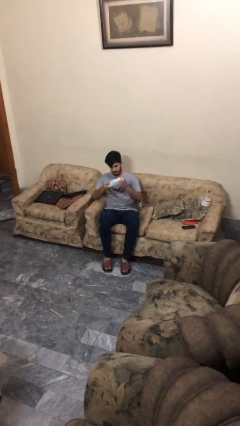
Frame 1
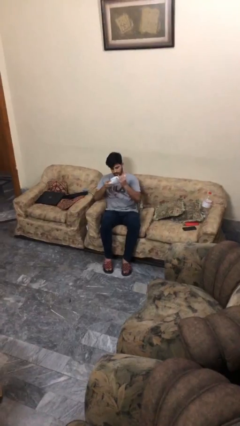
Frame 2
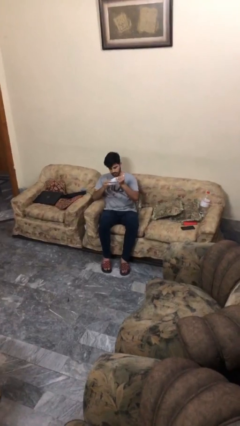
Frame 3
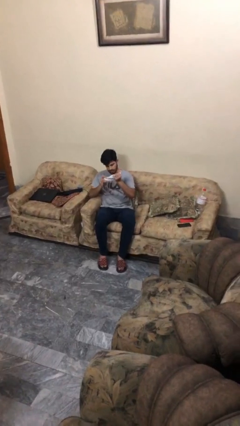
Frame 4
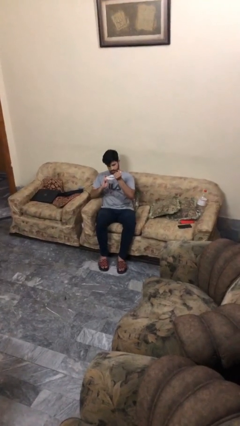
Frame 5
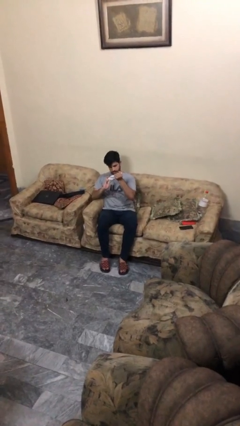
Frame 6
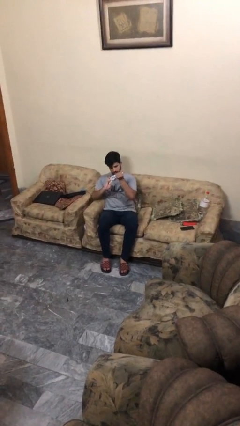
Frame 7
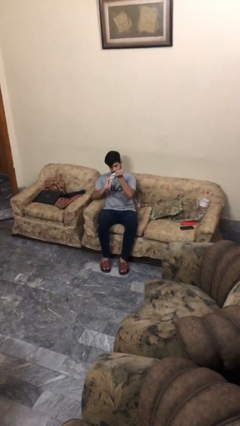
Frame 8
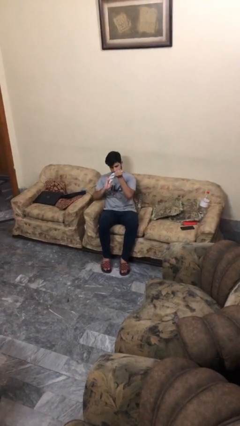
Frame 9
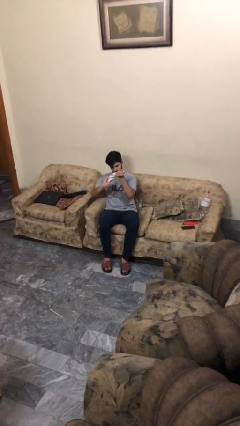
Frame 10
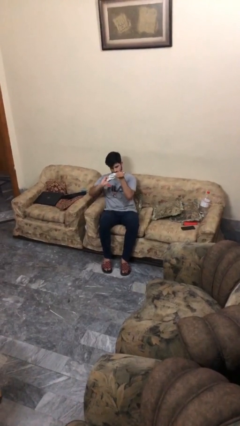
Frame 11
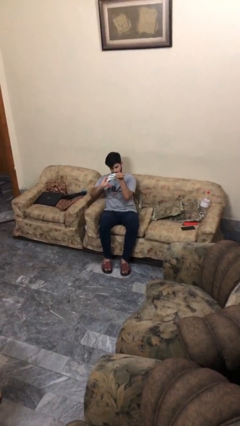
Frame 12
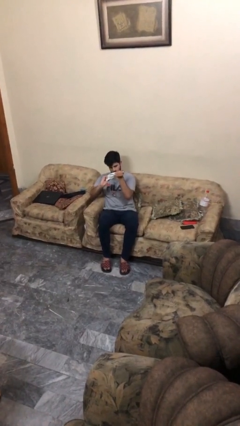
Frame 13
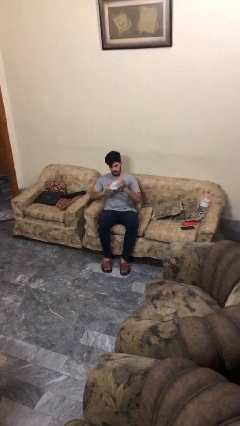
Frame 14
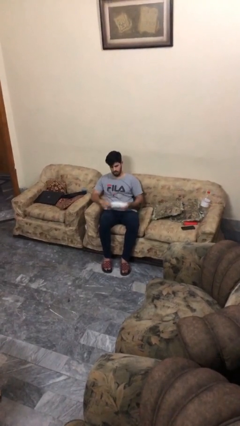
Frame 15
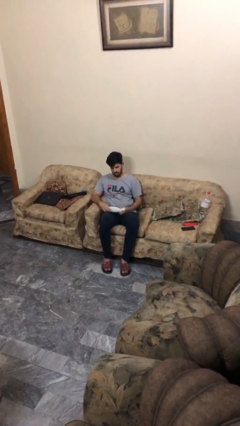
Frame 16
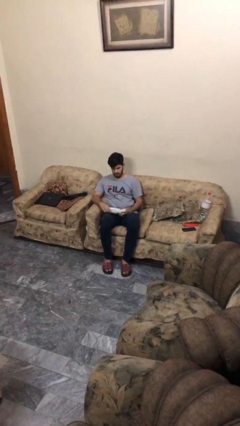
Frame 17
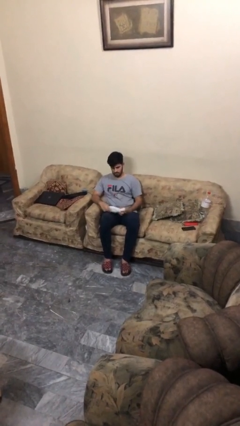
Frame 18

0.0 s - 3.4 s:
person squeezes object

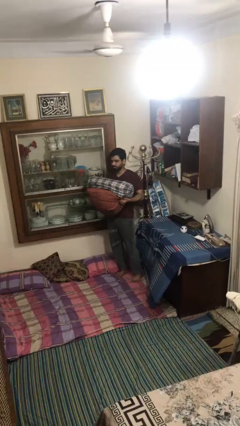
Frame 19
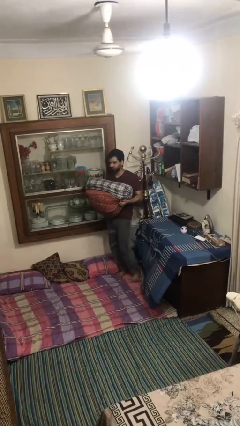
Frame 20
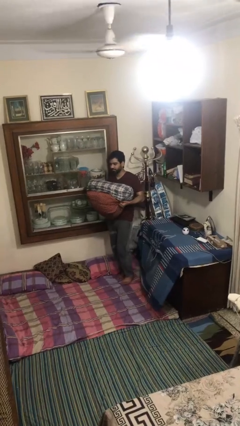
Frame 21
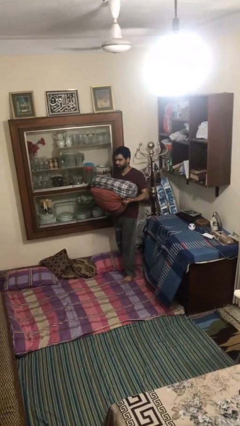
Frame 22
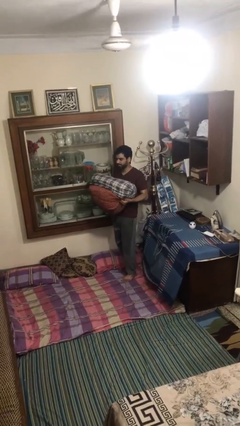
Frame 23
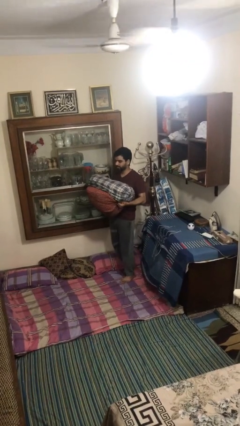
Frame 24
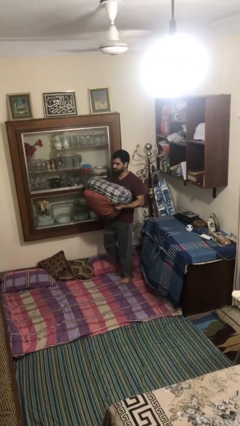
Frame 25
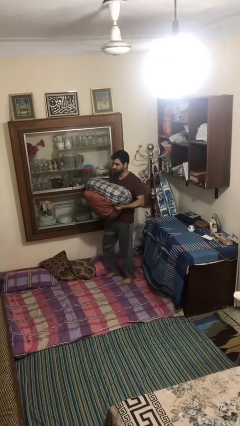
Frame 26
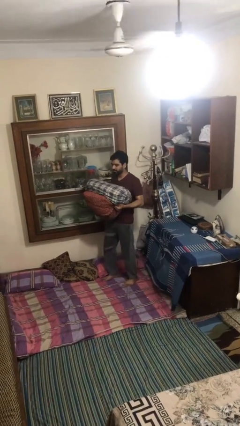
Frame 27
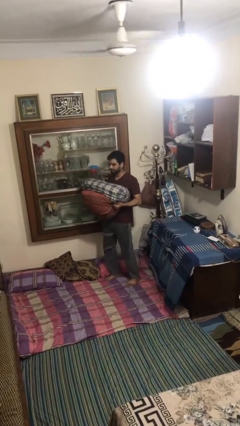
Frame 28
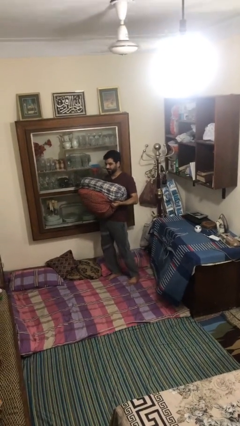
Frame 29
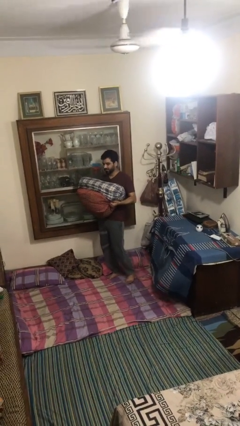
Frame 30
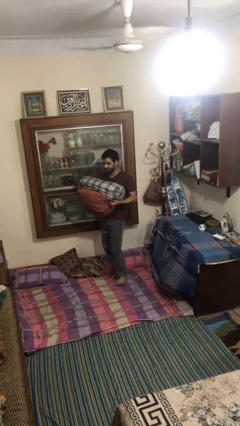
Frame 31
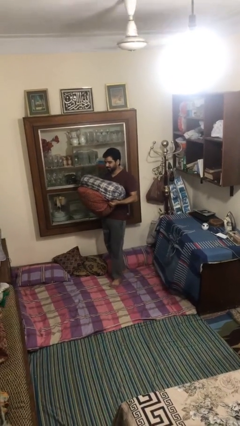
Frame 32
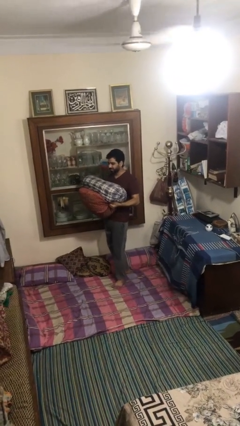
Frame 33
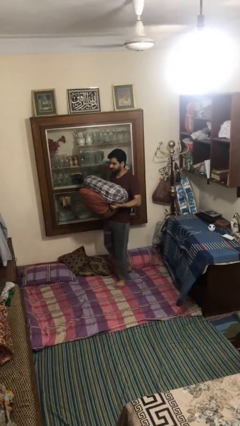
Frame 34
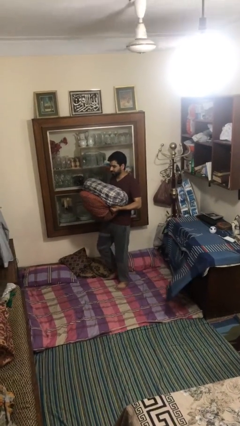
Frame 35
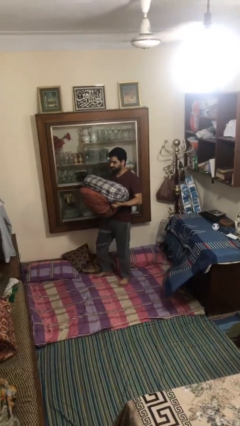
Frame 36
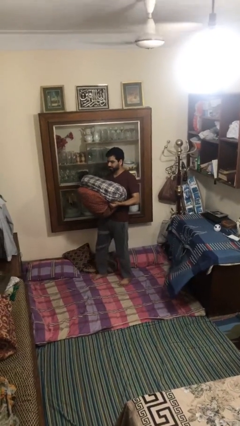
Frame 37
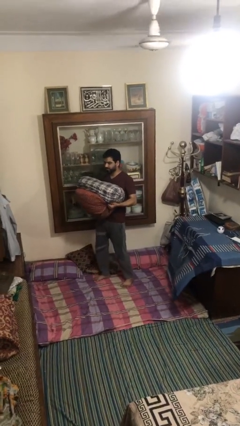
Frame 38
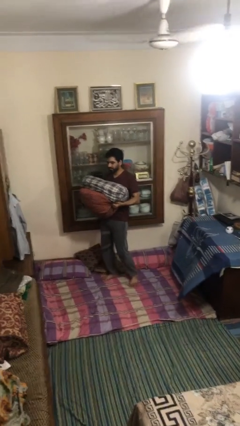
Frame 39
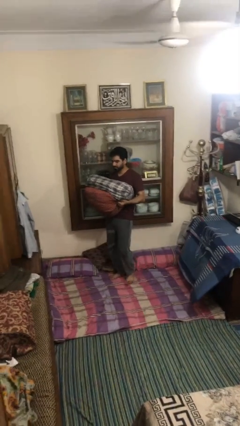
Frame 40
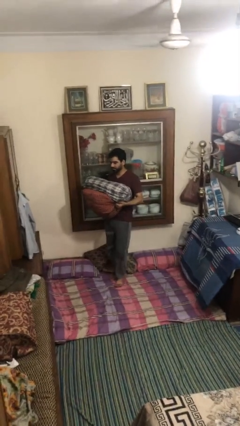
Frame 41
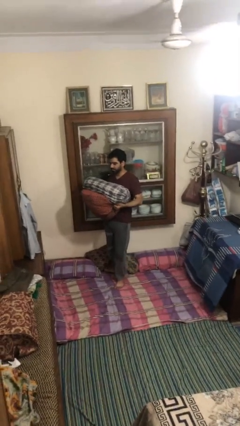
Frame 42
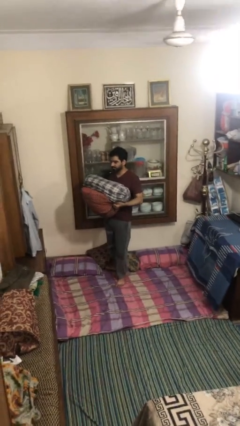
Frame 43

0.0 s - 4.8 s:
person carries heavy object

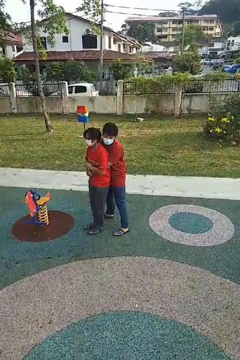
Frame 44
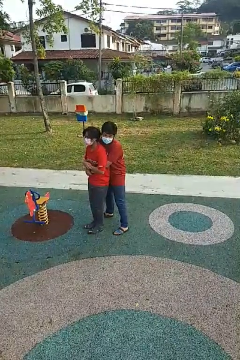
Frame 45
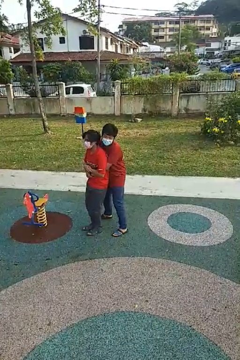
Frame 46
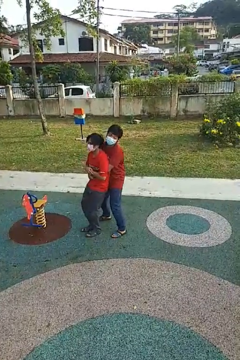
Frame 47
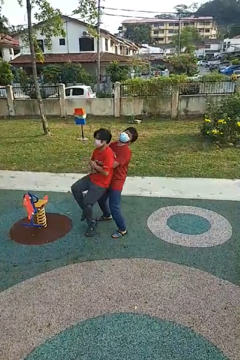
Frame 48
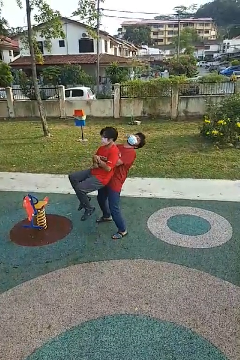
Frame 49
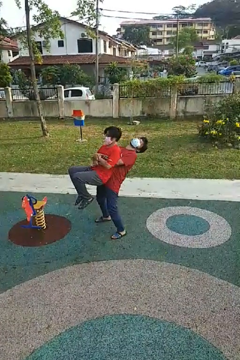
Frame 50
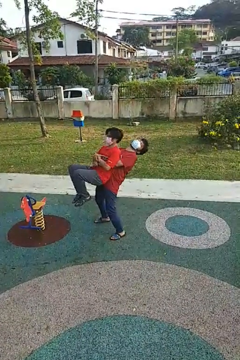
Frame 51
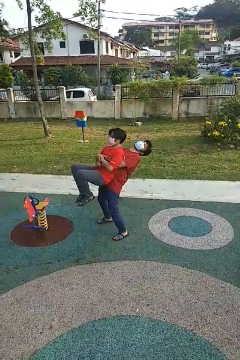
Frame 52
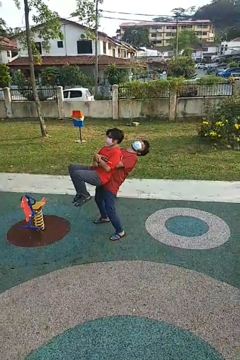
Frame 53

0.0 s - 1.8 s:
person picks up person

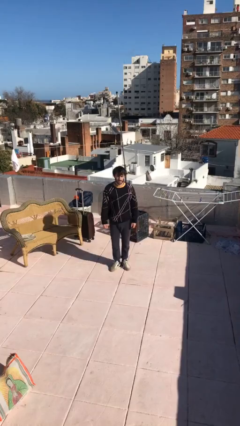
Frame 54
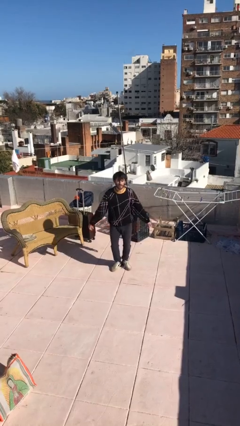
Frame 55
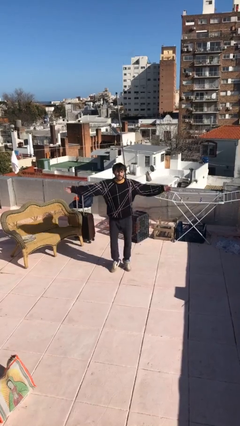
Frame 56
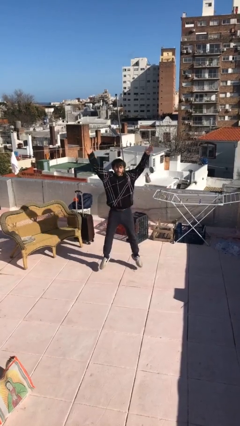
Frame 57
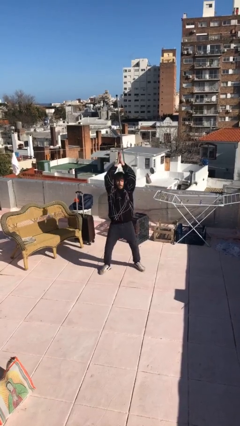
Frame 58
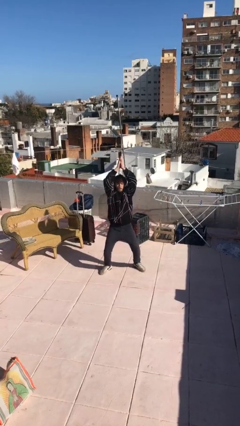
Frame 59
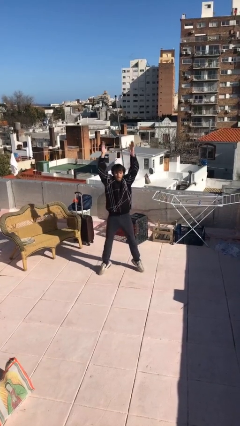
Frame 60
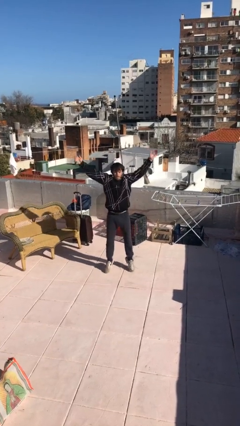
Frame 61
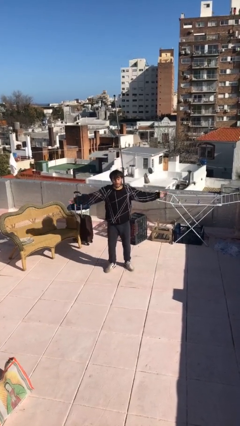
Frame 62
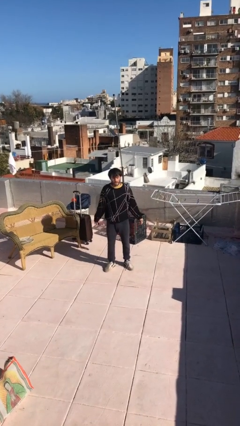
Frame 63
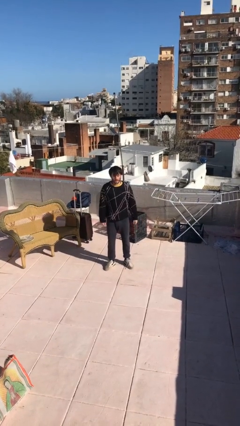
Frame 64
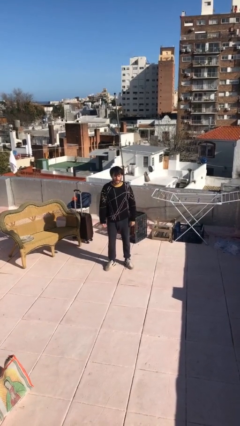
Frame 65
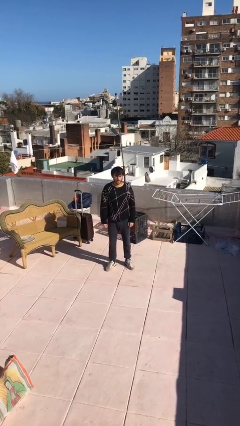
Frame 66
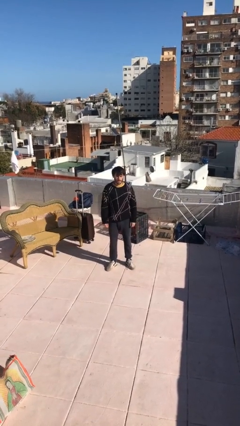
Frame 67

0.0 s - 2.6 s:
person exercises with jumping jacks

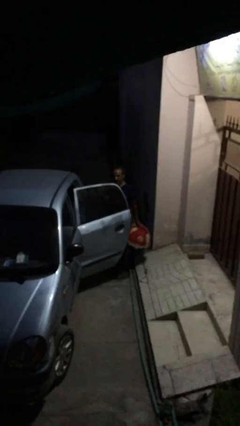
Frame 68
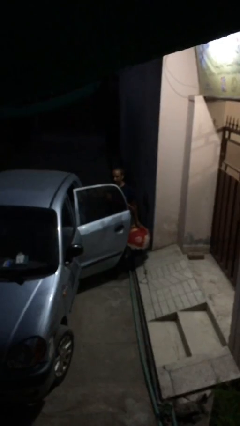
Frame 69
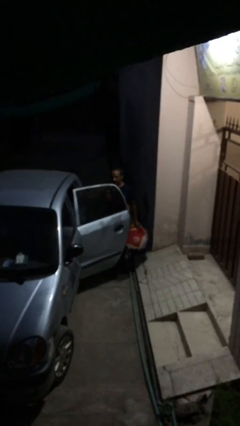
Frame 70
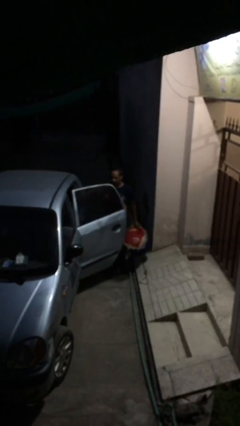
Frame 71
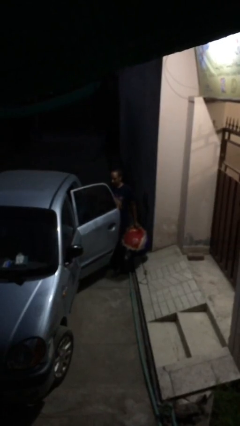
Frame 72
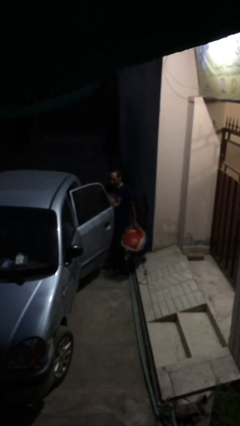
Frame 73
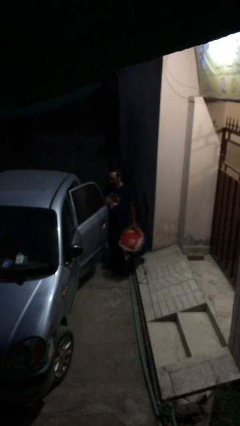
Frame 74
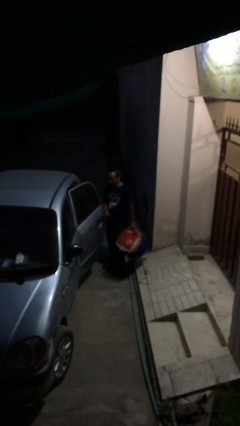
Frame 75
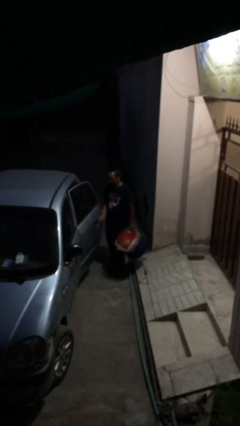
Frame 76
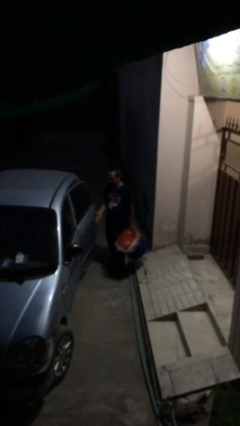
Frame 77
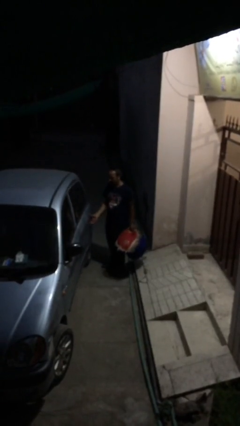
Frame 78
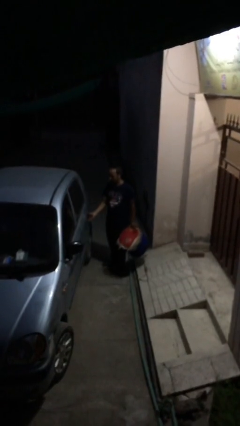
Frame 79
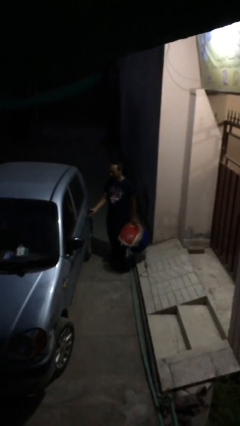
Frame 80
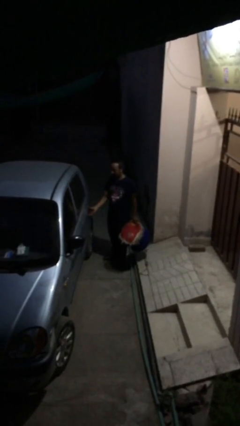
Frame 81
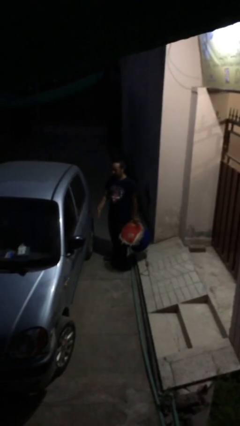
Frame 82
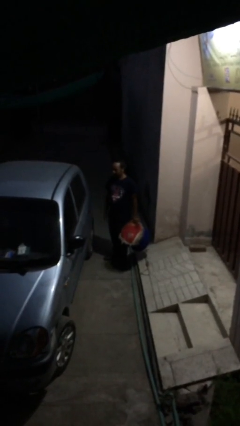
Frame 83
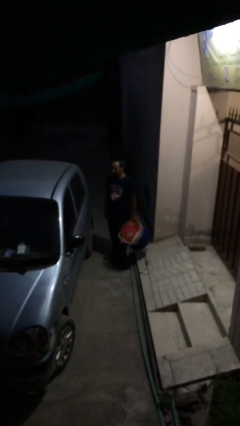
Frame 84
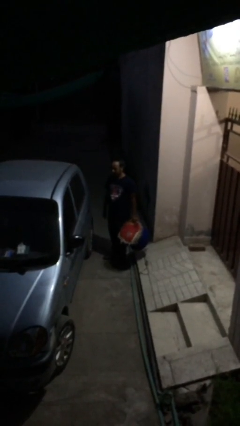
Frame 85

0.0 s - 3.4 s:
person closes car door

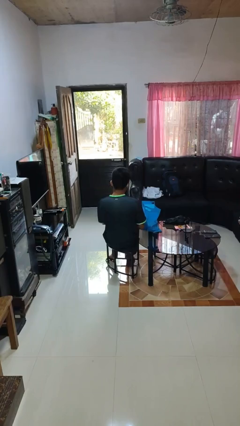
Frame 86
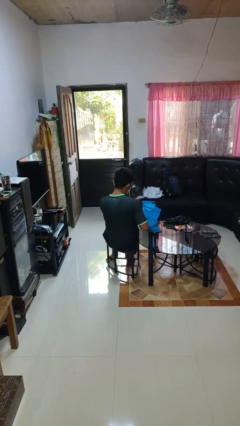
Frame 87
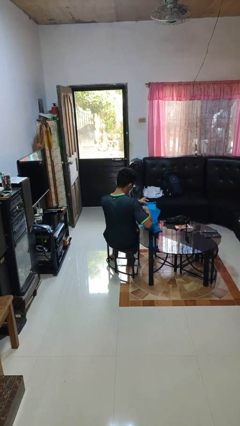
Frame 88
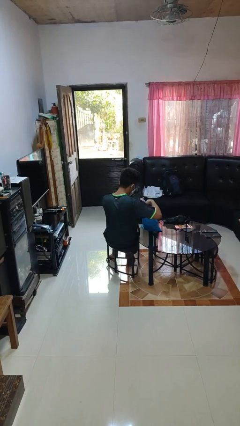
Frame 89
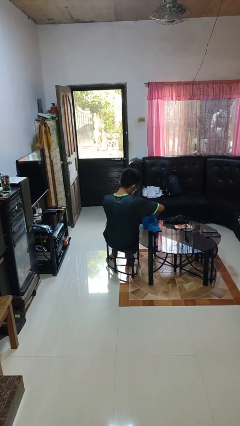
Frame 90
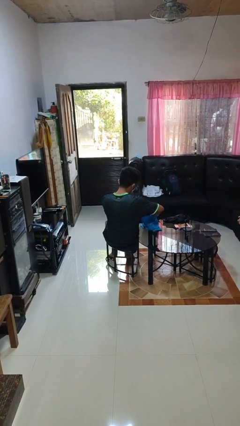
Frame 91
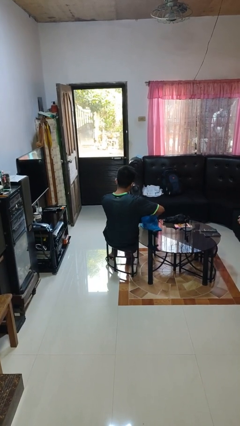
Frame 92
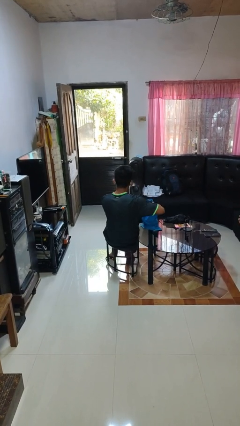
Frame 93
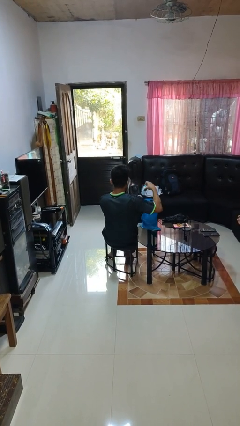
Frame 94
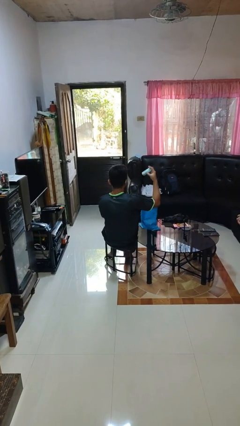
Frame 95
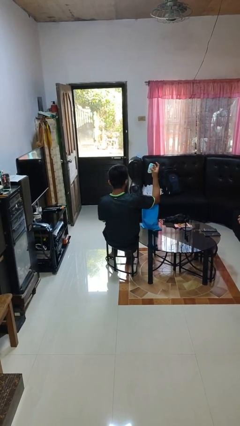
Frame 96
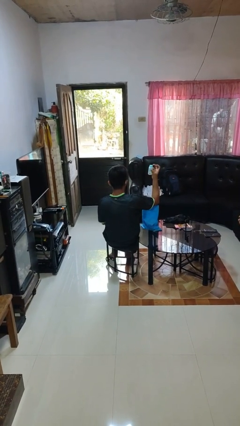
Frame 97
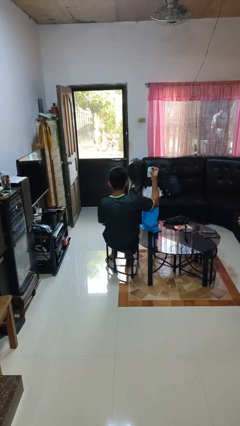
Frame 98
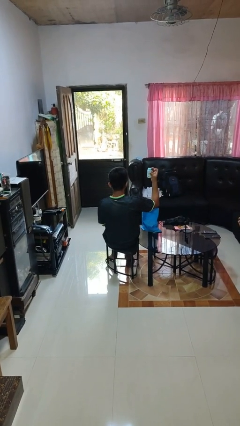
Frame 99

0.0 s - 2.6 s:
person takes object from bag
